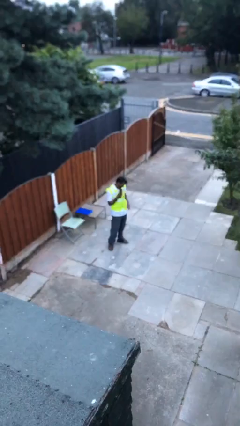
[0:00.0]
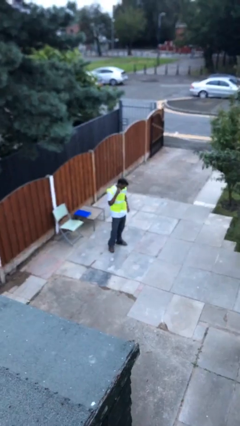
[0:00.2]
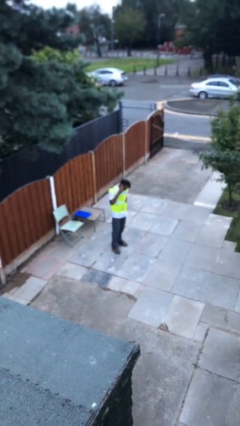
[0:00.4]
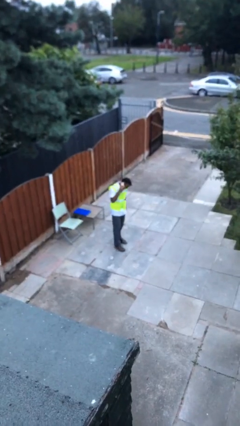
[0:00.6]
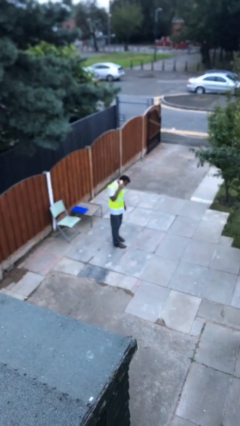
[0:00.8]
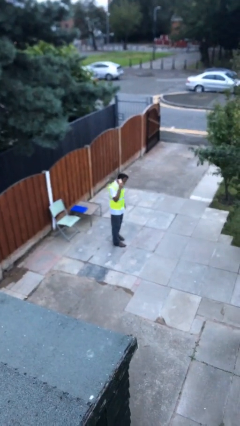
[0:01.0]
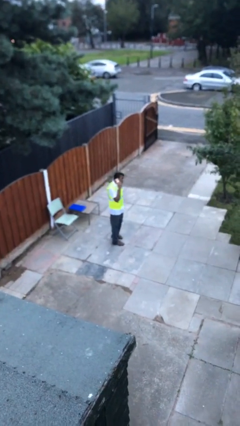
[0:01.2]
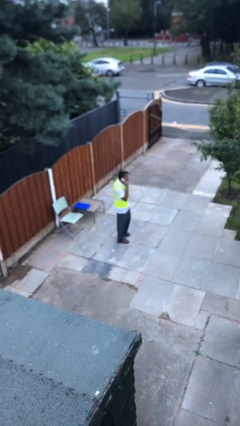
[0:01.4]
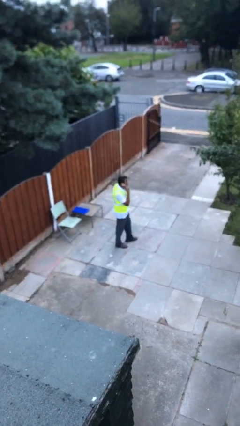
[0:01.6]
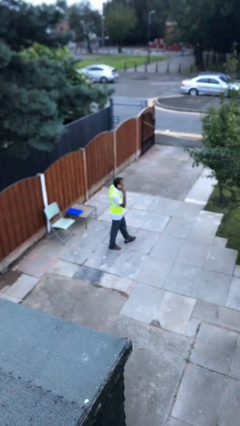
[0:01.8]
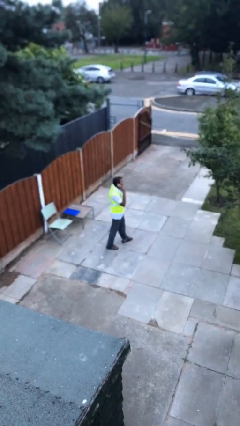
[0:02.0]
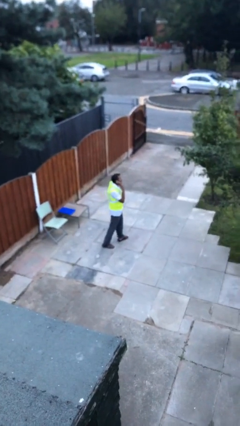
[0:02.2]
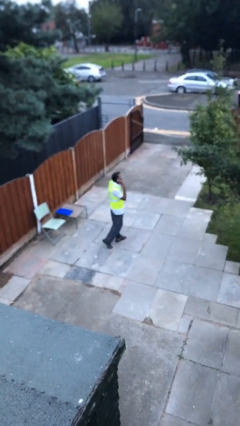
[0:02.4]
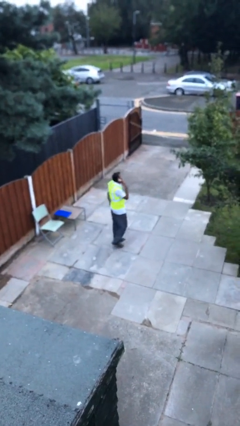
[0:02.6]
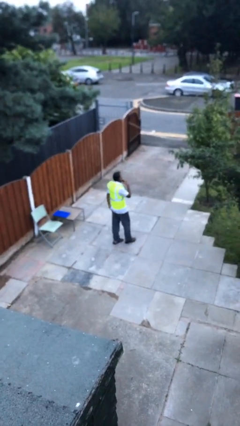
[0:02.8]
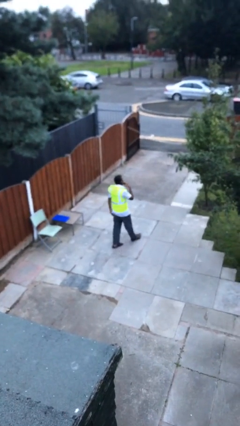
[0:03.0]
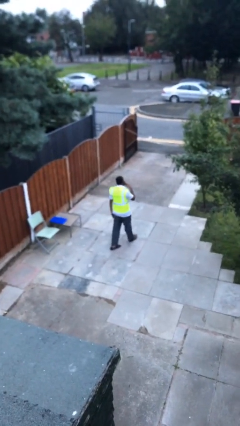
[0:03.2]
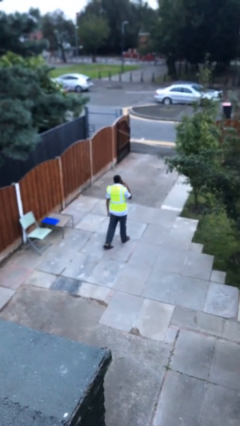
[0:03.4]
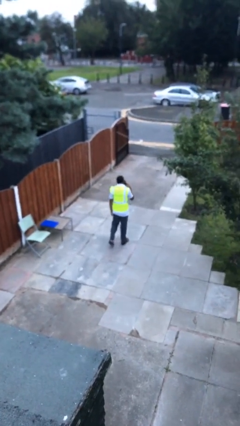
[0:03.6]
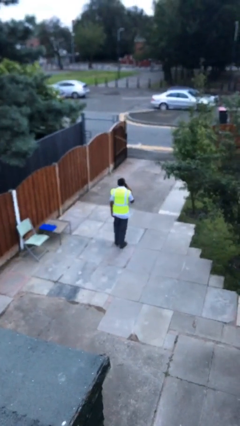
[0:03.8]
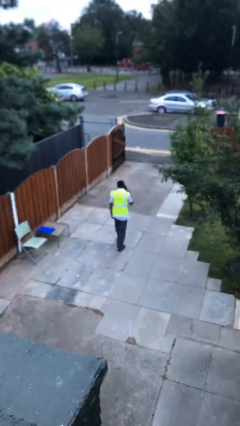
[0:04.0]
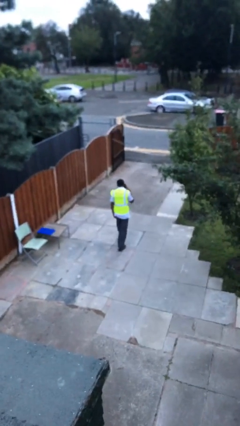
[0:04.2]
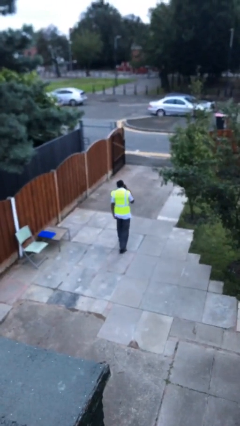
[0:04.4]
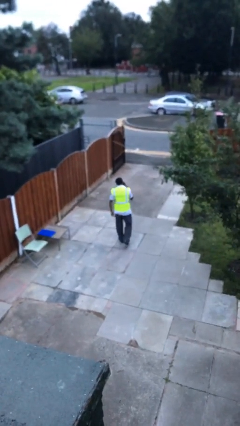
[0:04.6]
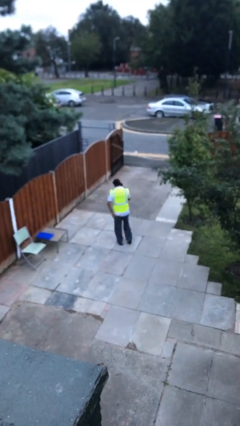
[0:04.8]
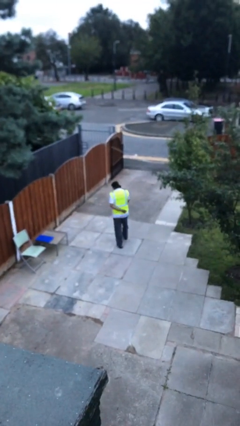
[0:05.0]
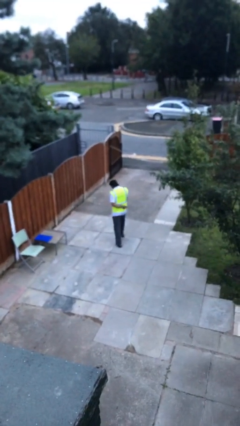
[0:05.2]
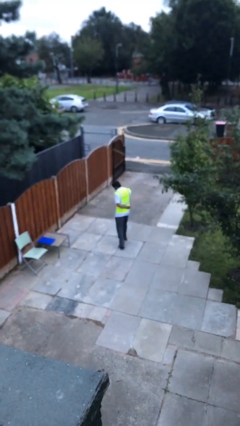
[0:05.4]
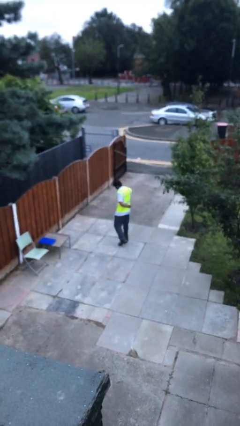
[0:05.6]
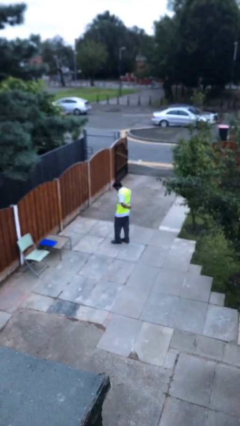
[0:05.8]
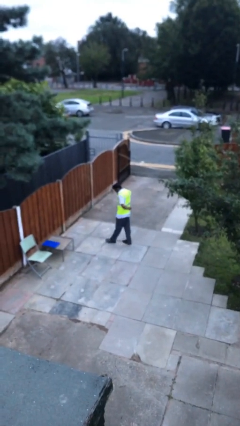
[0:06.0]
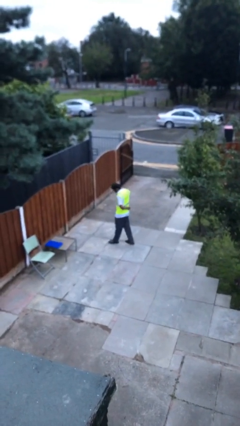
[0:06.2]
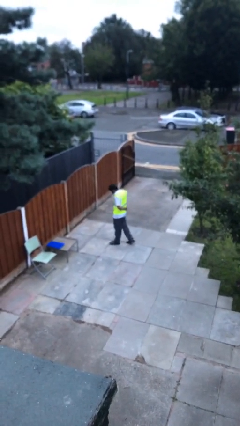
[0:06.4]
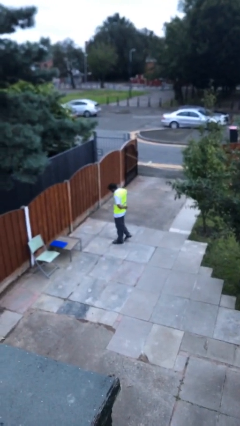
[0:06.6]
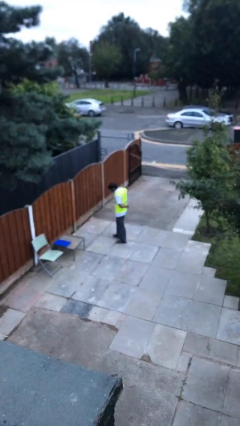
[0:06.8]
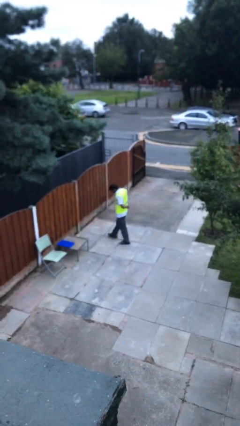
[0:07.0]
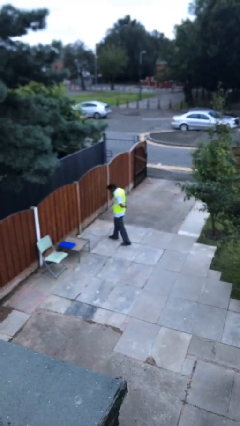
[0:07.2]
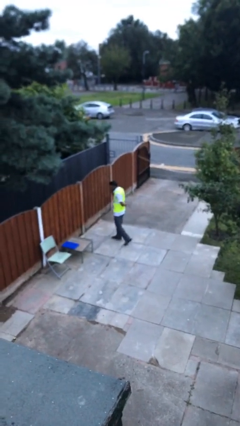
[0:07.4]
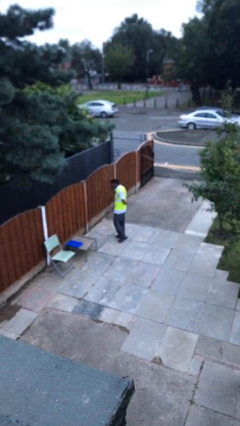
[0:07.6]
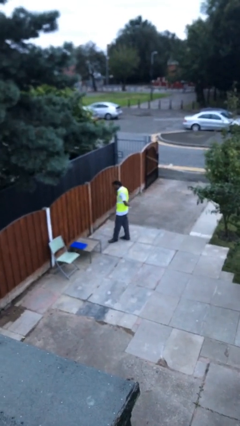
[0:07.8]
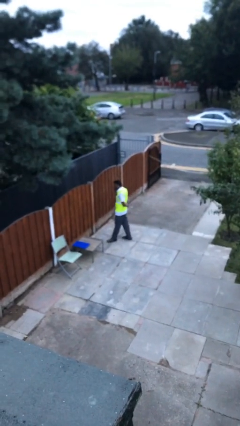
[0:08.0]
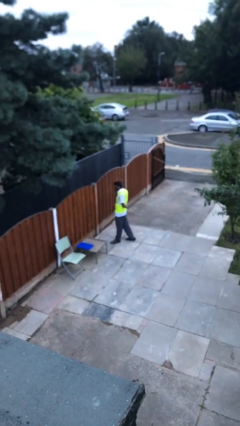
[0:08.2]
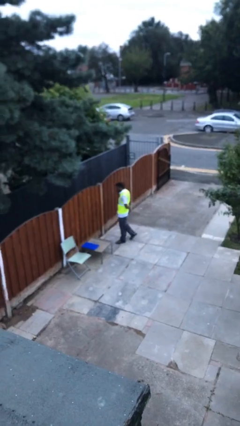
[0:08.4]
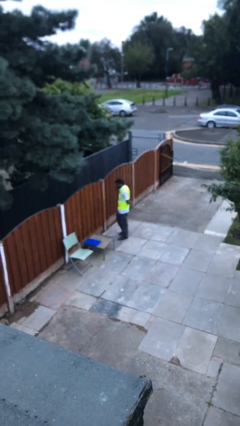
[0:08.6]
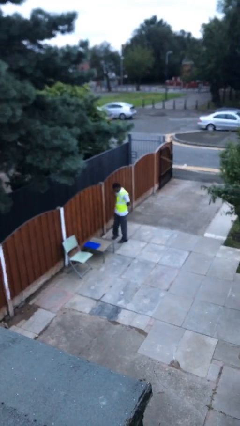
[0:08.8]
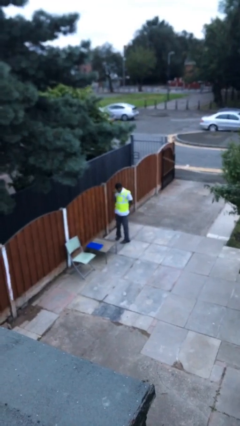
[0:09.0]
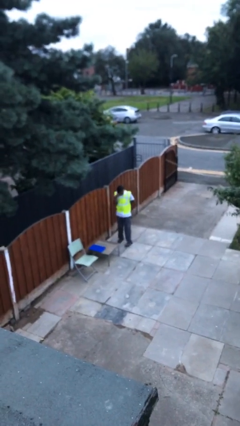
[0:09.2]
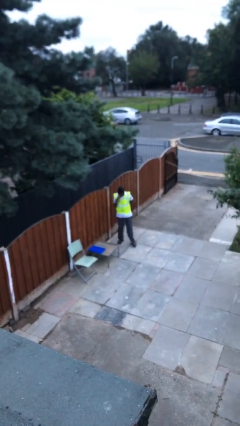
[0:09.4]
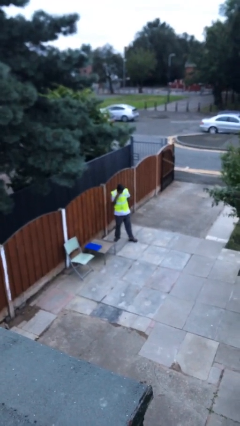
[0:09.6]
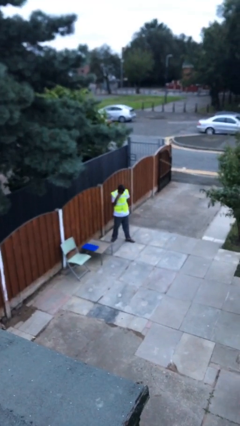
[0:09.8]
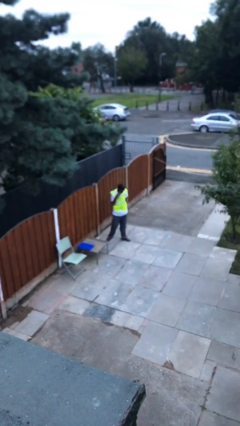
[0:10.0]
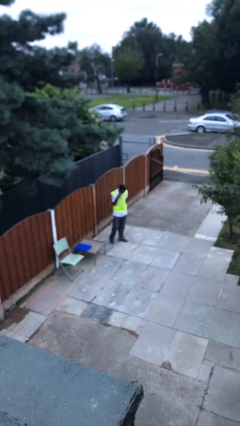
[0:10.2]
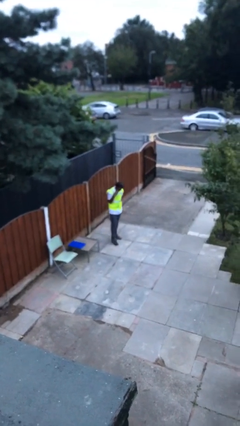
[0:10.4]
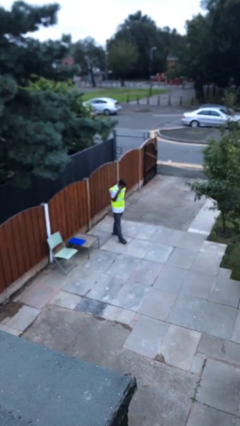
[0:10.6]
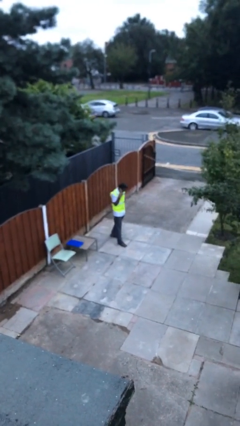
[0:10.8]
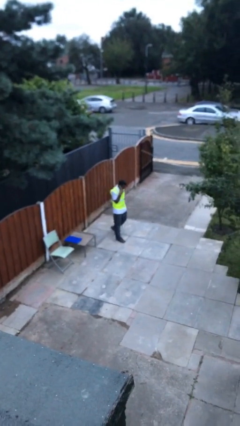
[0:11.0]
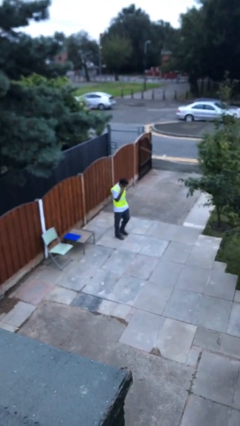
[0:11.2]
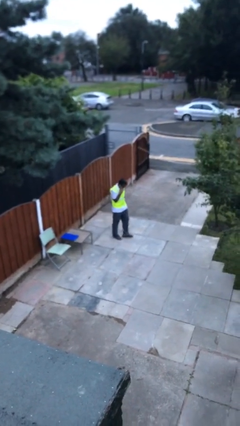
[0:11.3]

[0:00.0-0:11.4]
person talks on phone

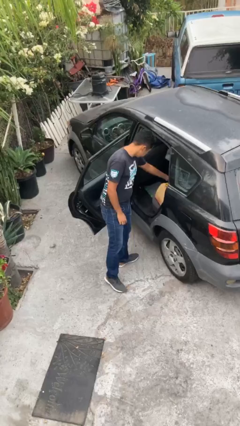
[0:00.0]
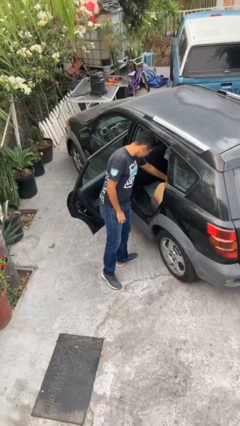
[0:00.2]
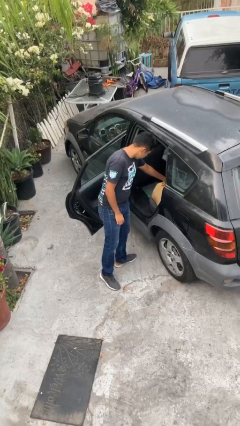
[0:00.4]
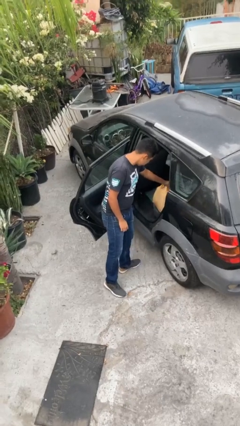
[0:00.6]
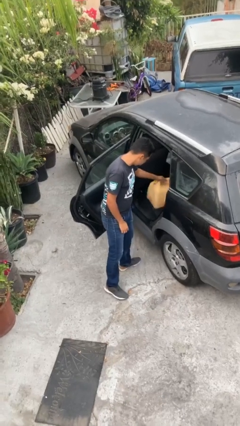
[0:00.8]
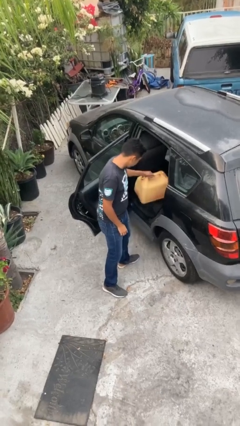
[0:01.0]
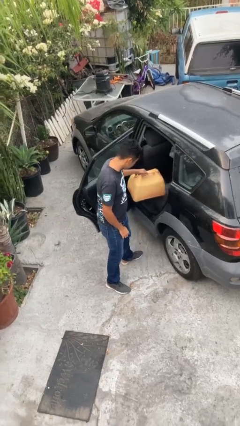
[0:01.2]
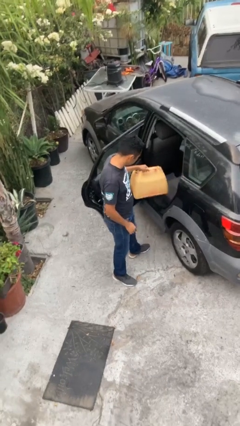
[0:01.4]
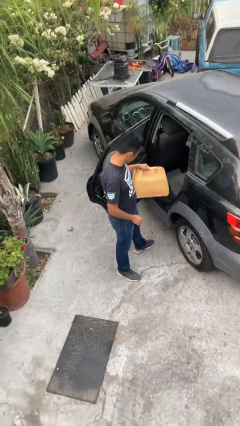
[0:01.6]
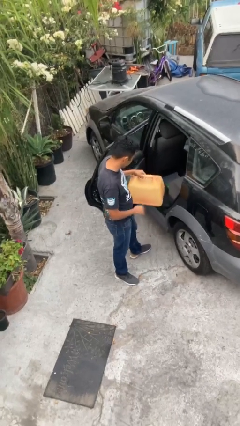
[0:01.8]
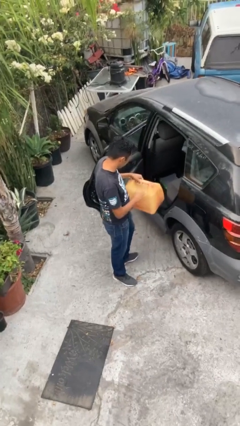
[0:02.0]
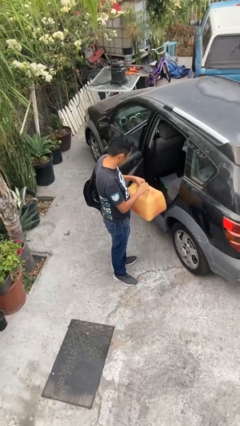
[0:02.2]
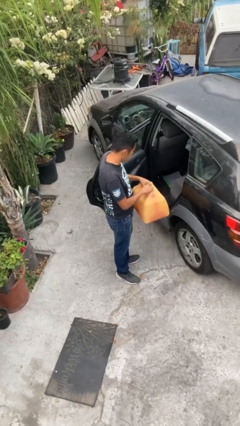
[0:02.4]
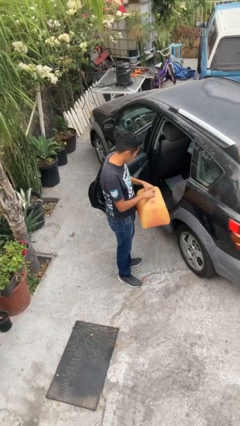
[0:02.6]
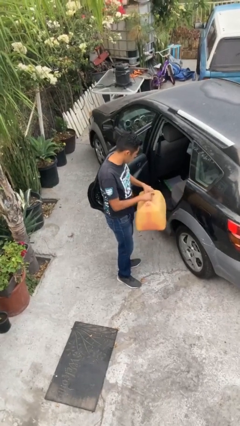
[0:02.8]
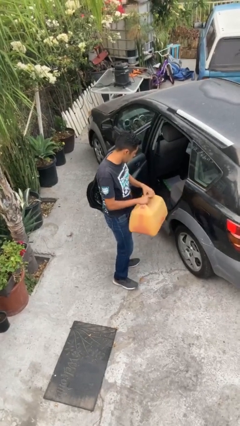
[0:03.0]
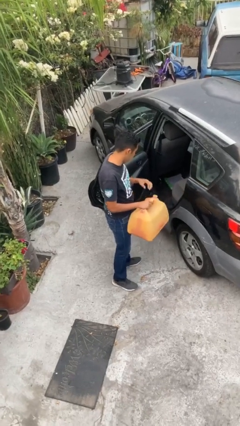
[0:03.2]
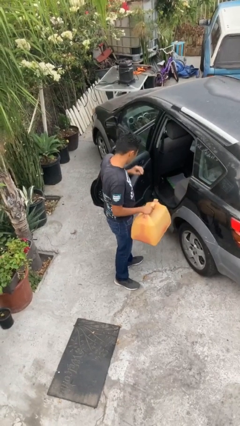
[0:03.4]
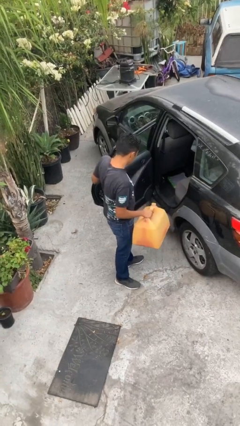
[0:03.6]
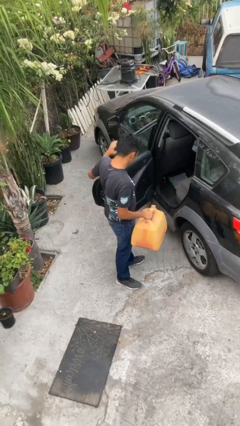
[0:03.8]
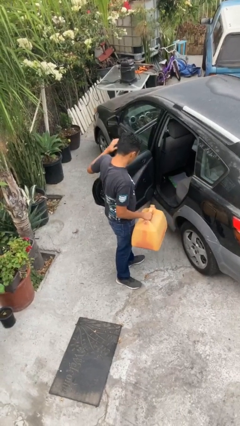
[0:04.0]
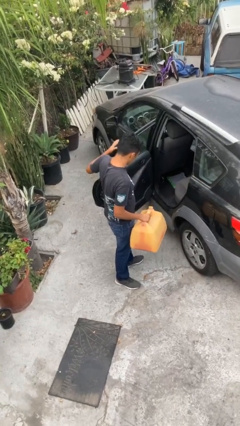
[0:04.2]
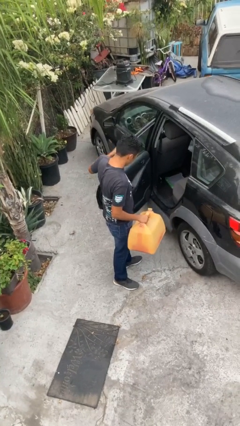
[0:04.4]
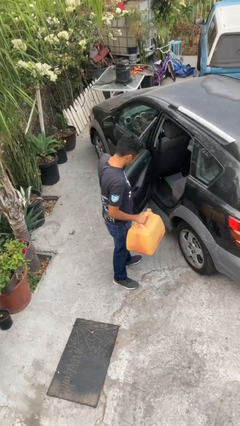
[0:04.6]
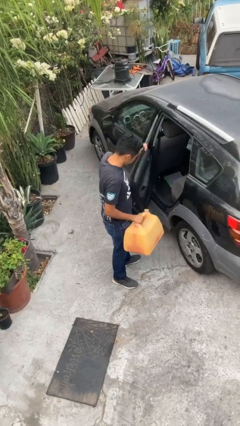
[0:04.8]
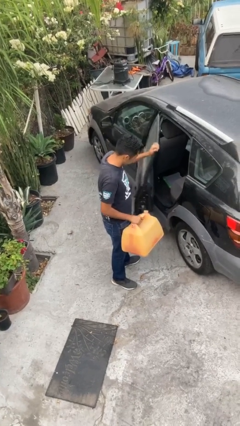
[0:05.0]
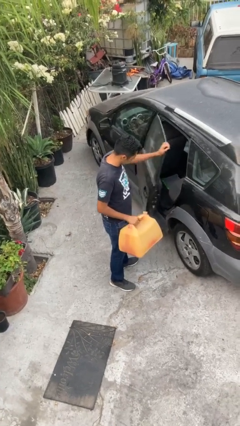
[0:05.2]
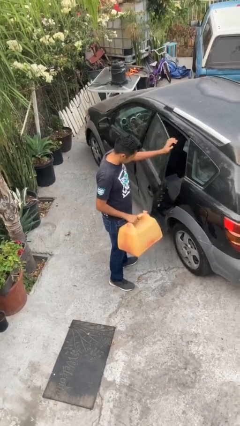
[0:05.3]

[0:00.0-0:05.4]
person unloads car

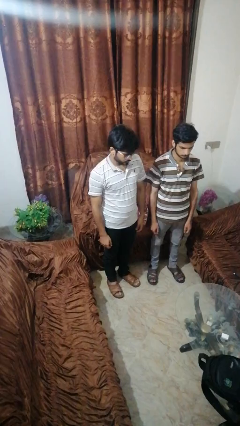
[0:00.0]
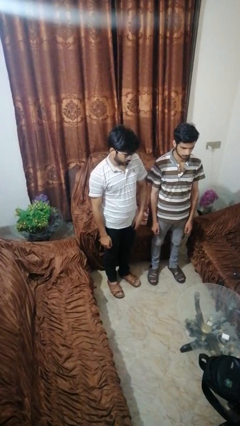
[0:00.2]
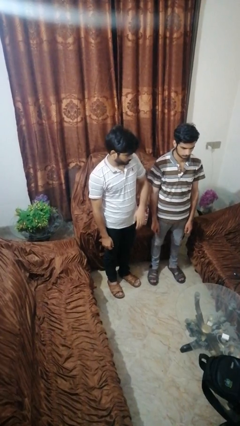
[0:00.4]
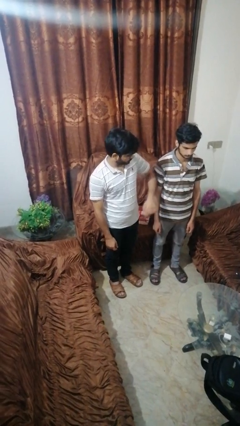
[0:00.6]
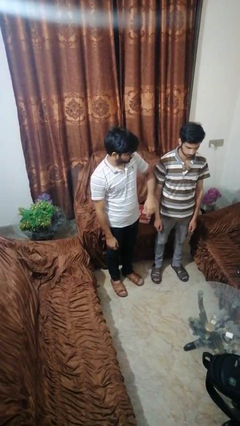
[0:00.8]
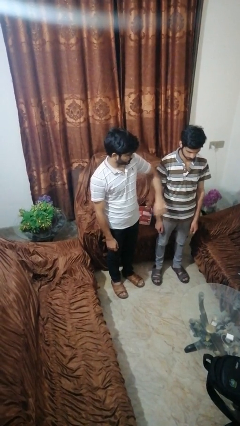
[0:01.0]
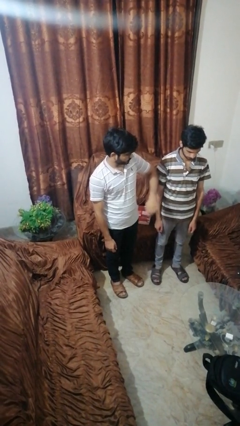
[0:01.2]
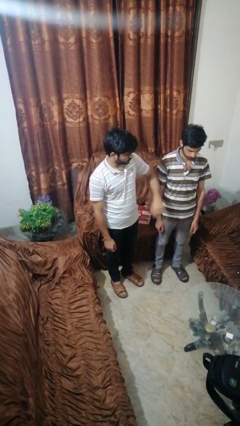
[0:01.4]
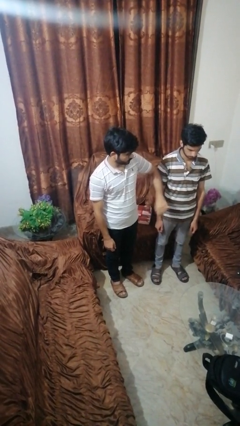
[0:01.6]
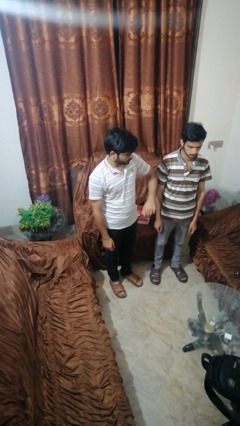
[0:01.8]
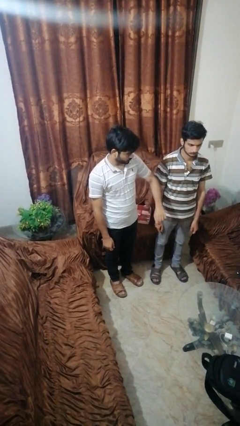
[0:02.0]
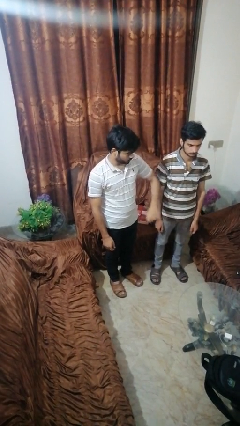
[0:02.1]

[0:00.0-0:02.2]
person nudges person with elbow
